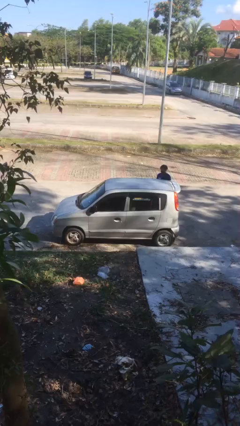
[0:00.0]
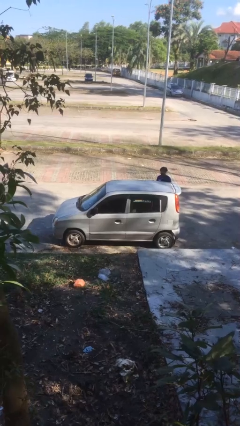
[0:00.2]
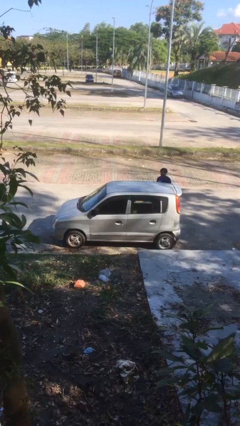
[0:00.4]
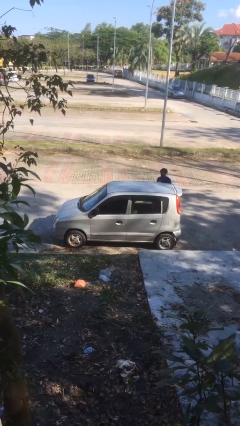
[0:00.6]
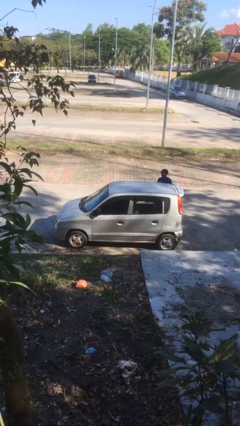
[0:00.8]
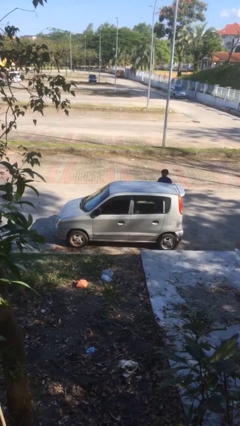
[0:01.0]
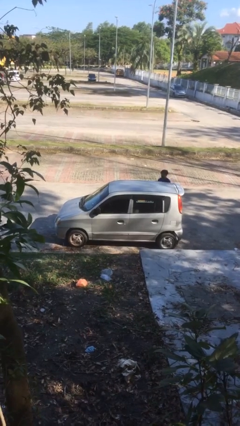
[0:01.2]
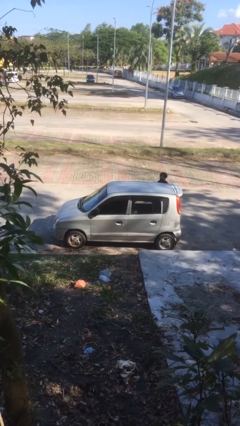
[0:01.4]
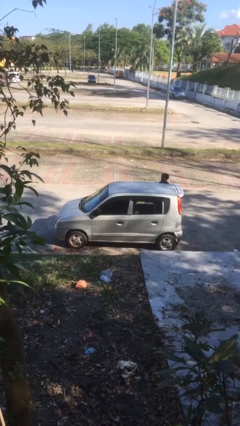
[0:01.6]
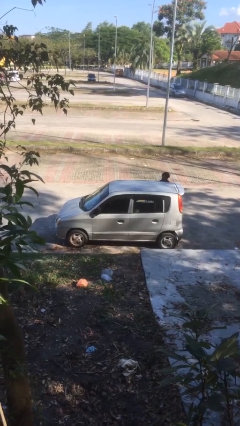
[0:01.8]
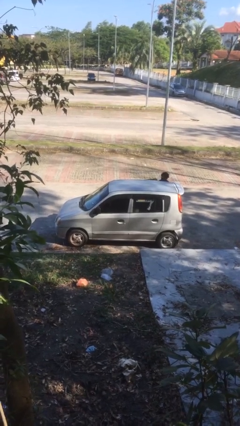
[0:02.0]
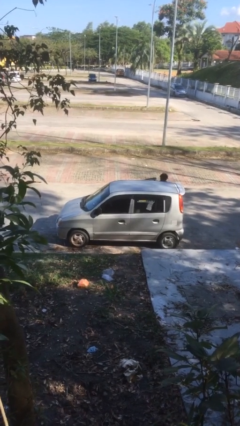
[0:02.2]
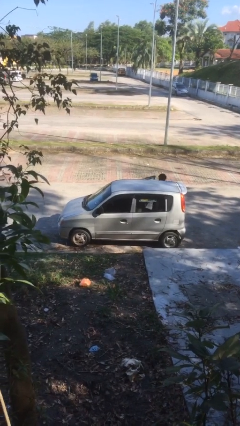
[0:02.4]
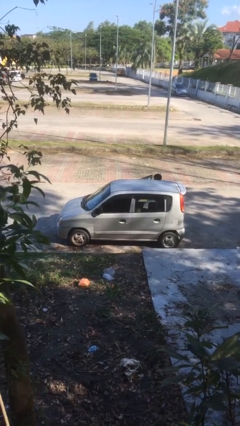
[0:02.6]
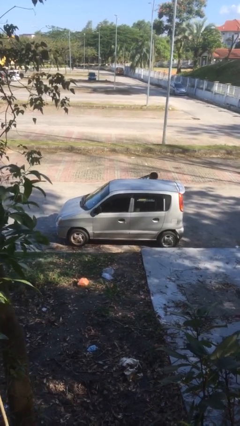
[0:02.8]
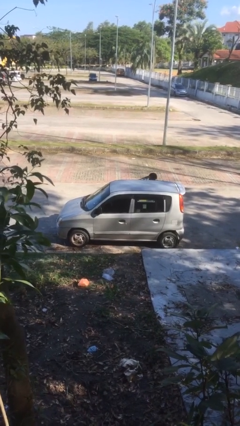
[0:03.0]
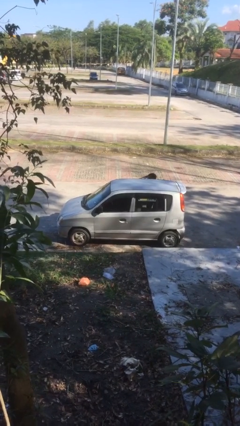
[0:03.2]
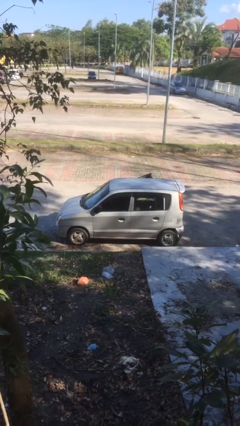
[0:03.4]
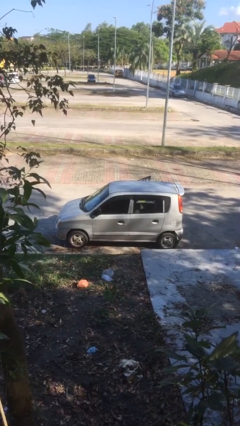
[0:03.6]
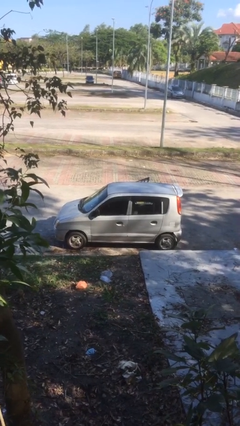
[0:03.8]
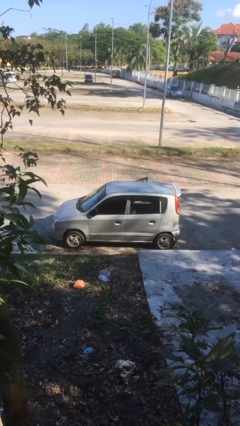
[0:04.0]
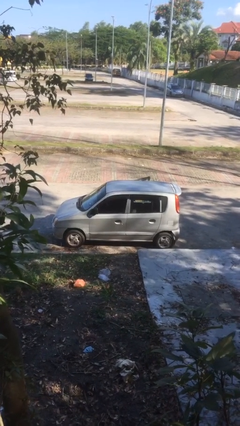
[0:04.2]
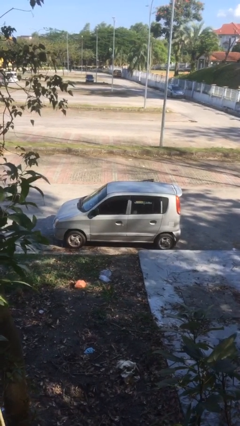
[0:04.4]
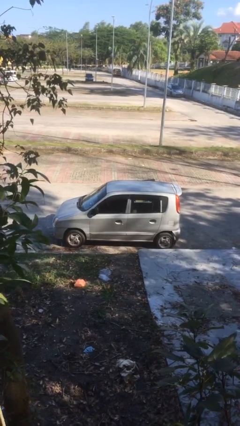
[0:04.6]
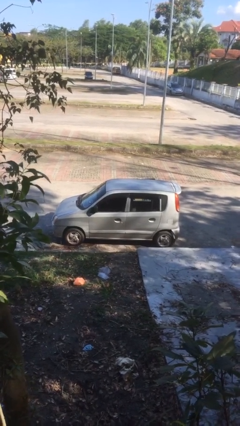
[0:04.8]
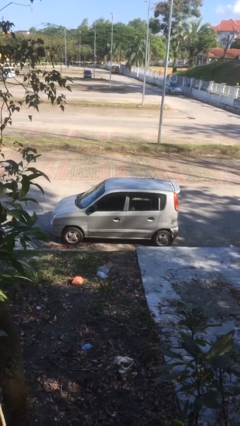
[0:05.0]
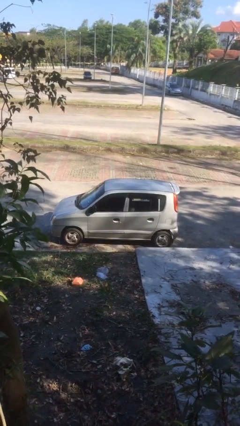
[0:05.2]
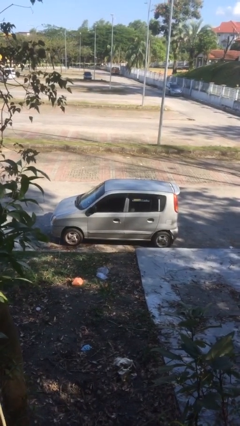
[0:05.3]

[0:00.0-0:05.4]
car picks up person

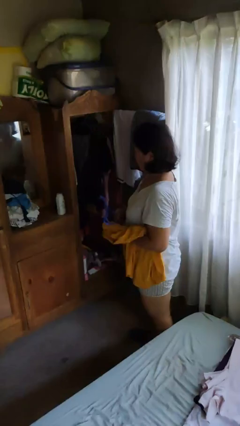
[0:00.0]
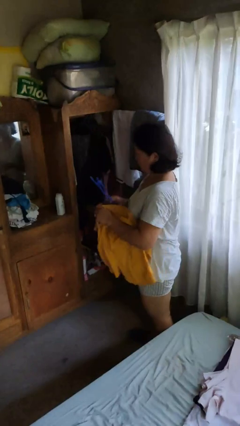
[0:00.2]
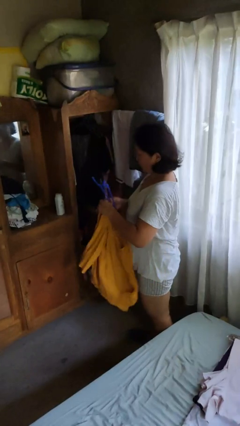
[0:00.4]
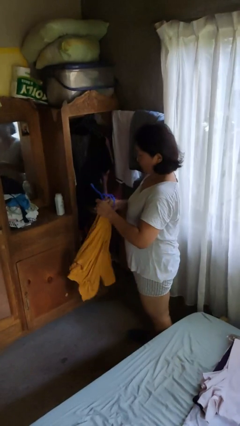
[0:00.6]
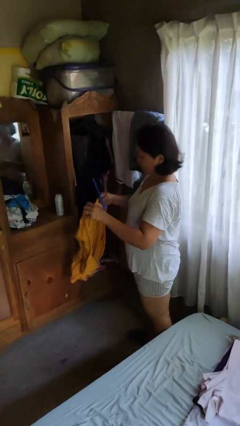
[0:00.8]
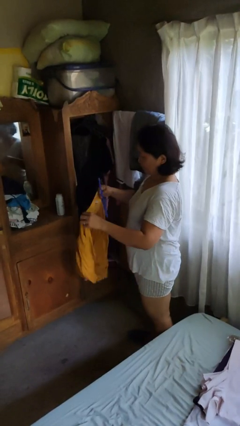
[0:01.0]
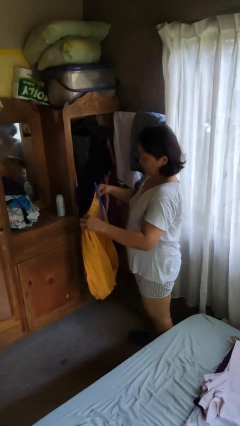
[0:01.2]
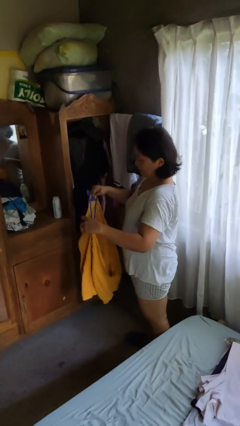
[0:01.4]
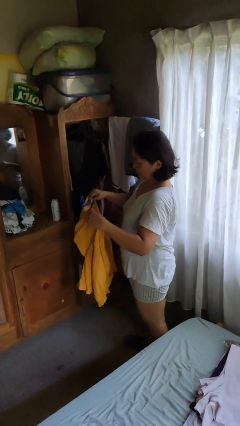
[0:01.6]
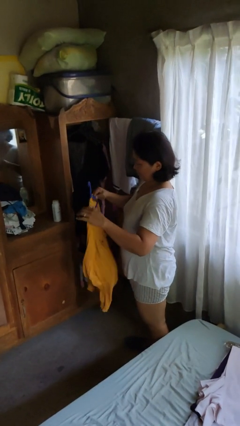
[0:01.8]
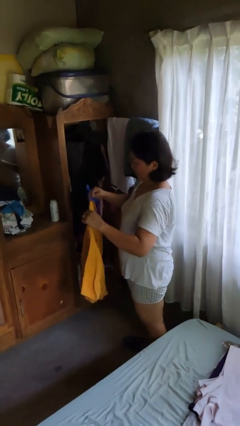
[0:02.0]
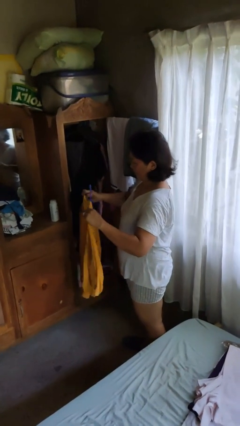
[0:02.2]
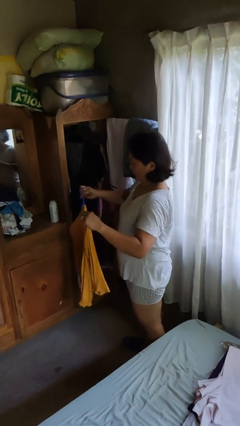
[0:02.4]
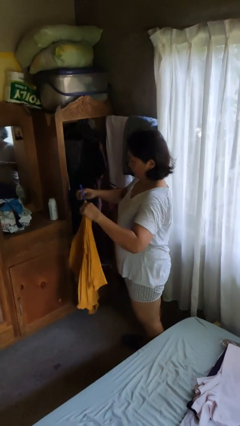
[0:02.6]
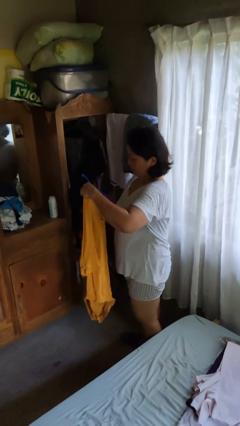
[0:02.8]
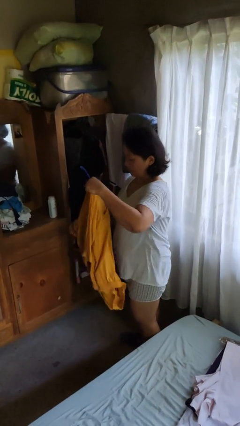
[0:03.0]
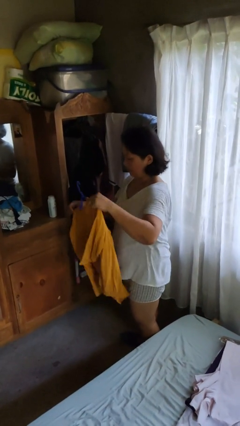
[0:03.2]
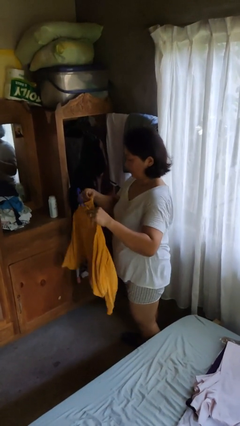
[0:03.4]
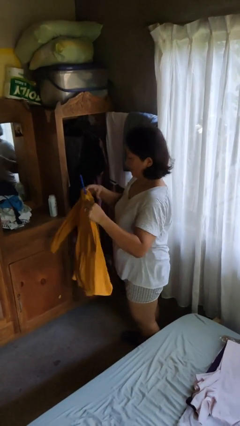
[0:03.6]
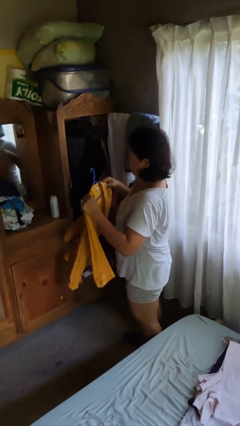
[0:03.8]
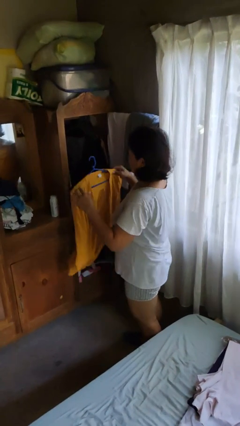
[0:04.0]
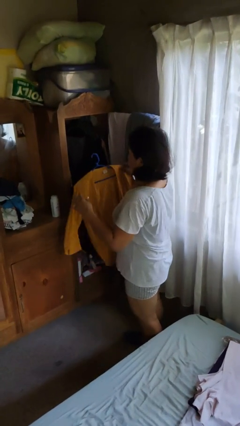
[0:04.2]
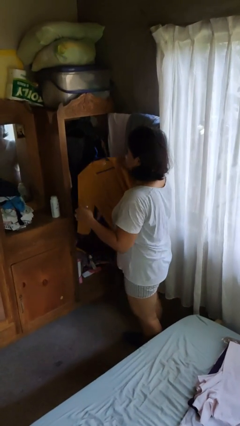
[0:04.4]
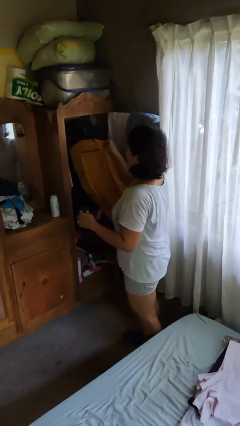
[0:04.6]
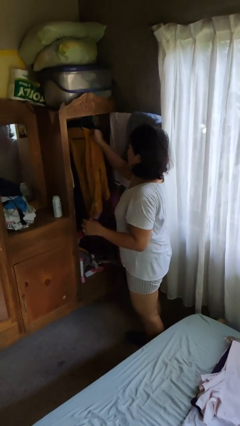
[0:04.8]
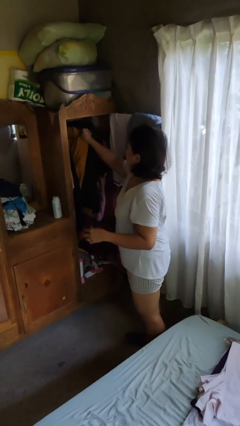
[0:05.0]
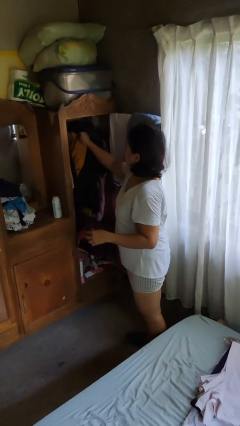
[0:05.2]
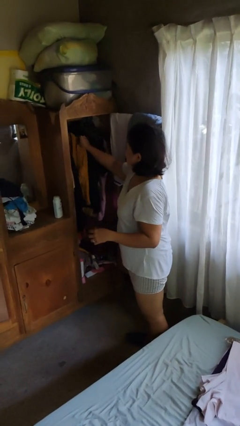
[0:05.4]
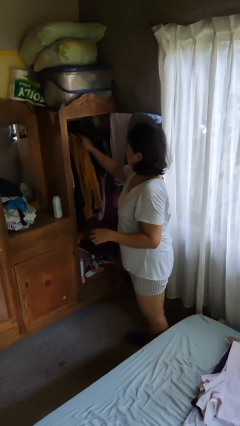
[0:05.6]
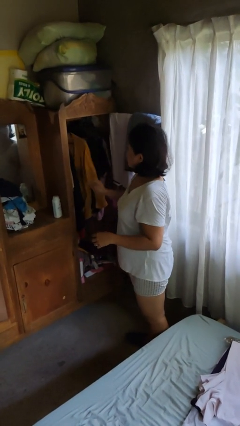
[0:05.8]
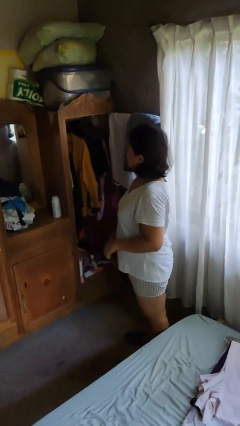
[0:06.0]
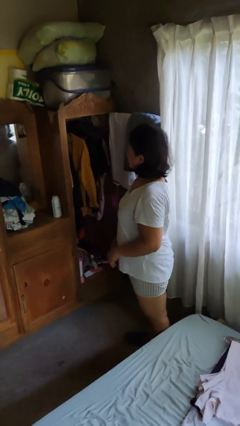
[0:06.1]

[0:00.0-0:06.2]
person puts clothes into closet

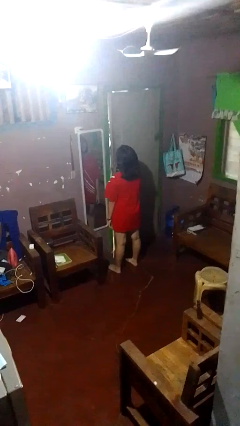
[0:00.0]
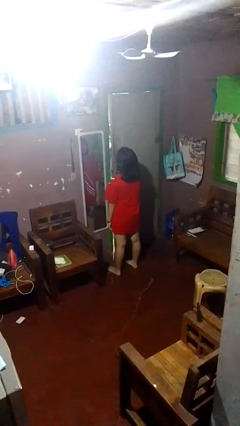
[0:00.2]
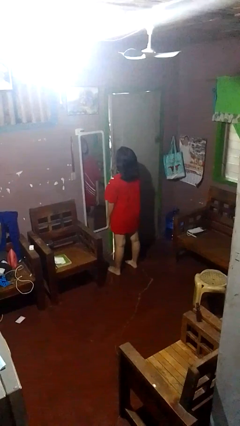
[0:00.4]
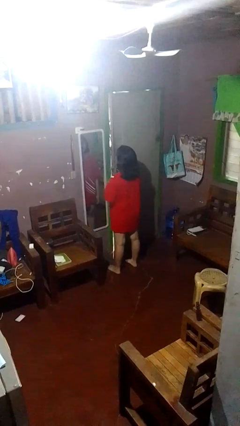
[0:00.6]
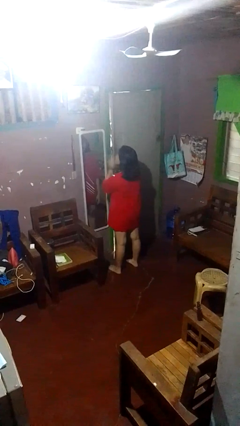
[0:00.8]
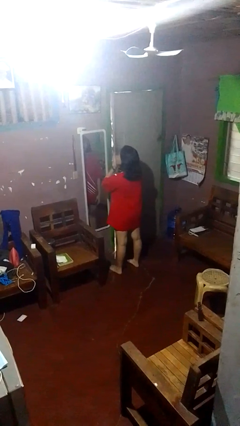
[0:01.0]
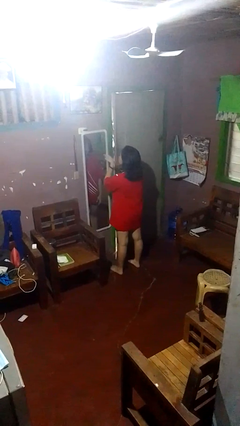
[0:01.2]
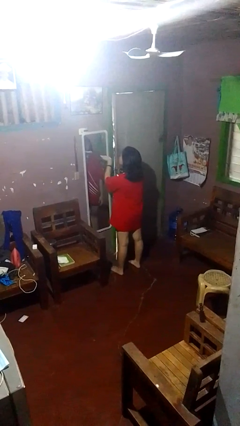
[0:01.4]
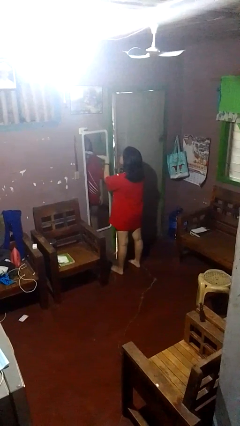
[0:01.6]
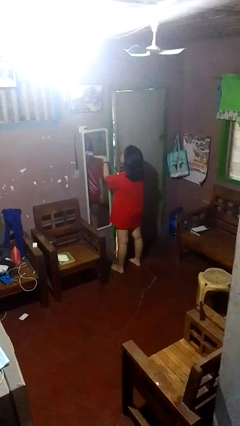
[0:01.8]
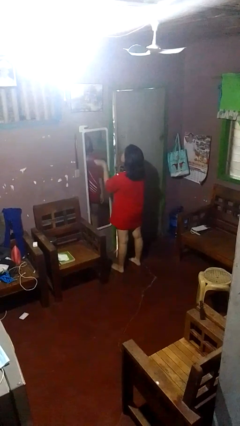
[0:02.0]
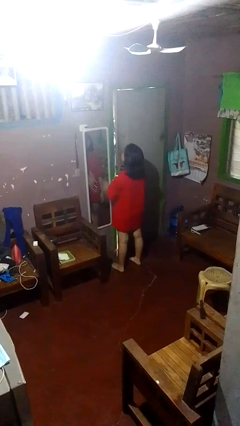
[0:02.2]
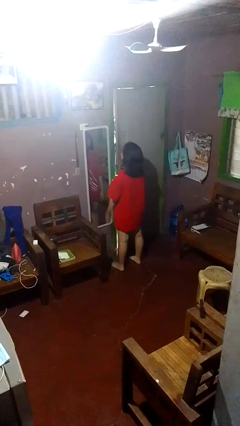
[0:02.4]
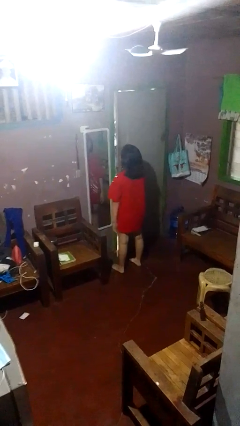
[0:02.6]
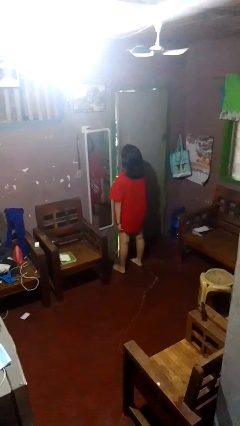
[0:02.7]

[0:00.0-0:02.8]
person gestures blow kiss

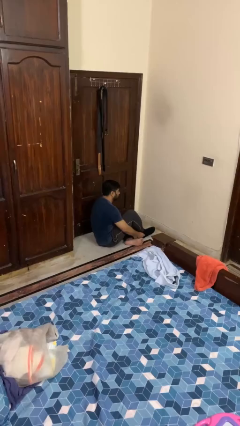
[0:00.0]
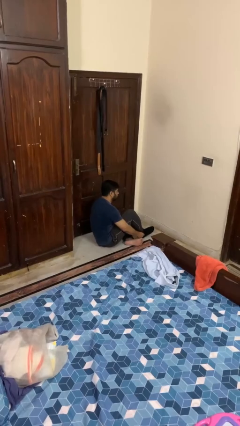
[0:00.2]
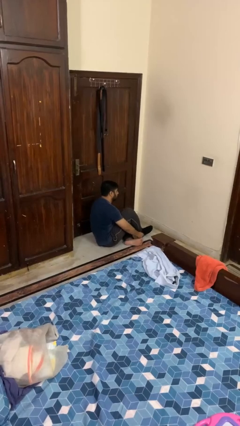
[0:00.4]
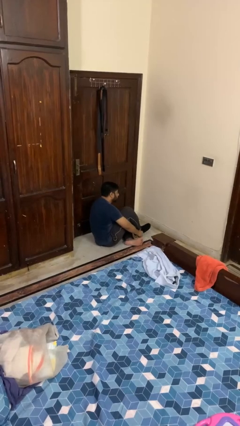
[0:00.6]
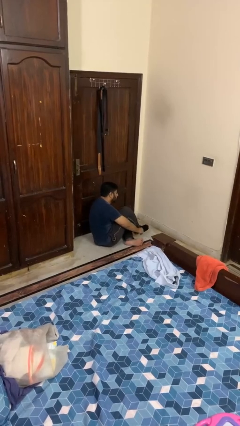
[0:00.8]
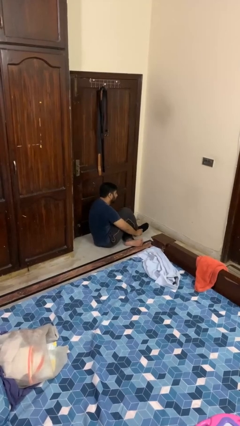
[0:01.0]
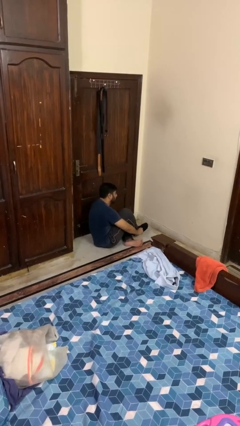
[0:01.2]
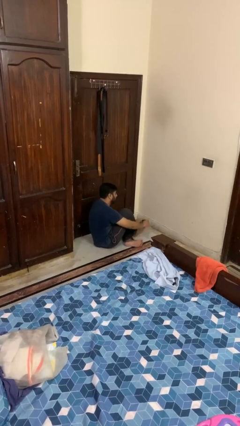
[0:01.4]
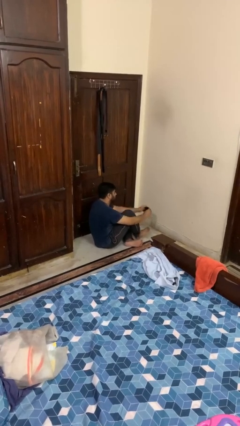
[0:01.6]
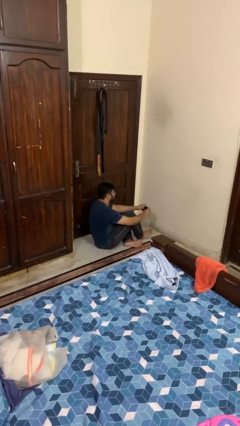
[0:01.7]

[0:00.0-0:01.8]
person takes off socks

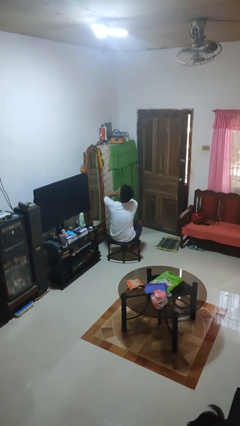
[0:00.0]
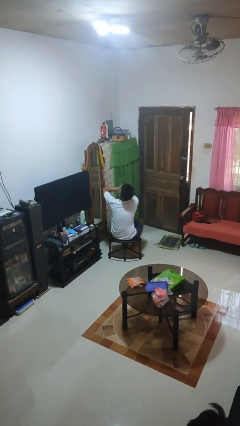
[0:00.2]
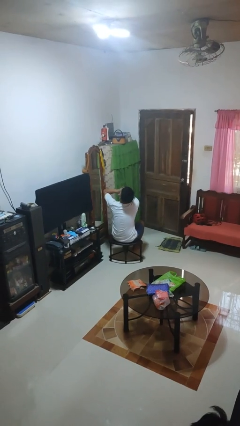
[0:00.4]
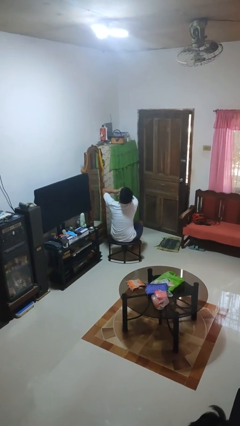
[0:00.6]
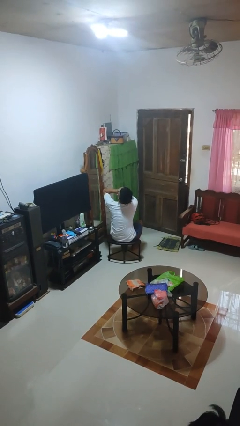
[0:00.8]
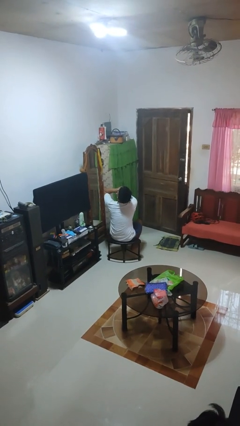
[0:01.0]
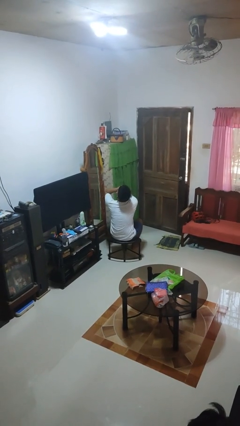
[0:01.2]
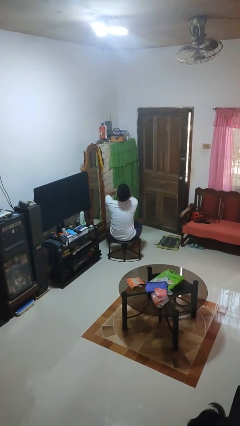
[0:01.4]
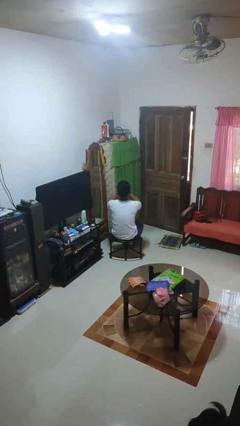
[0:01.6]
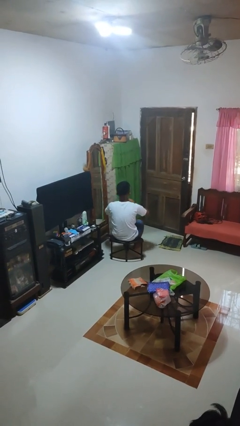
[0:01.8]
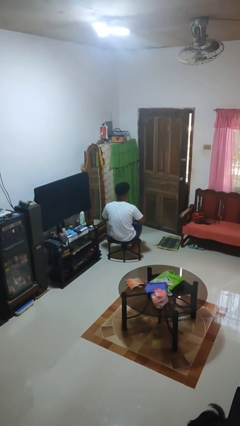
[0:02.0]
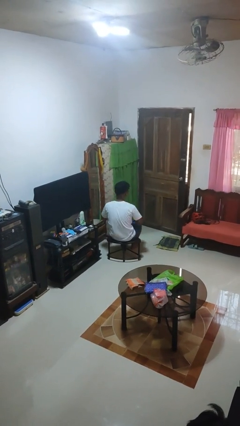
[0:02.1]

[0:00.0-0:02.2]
person yawns
